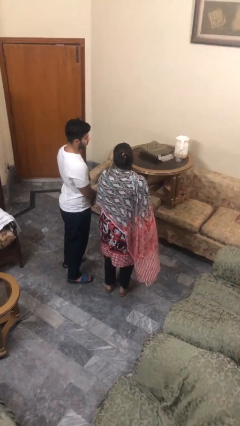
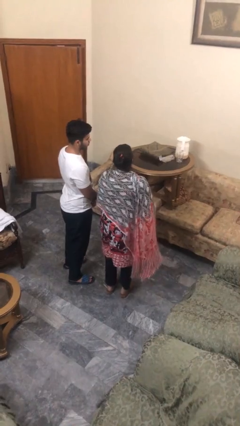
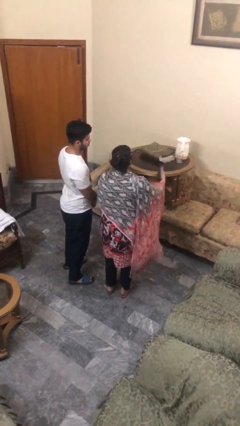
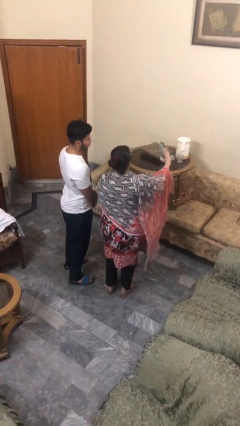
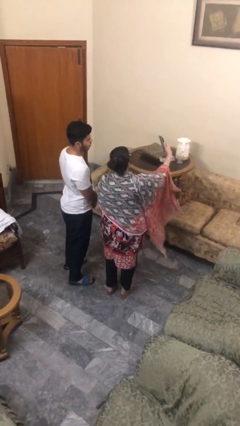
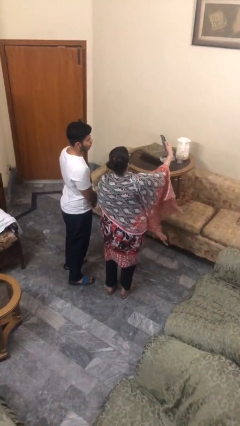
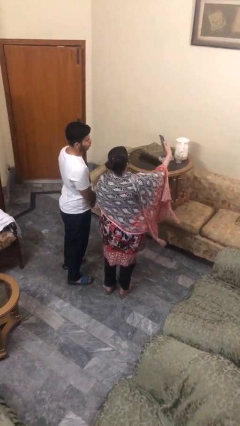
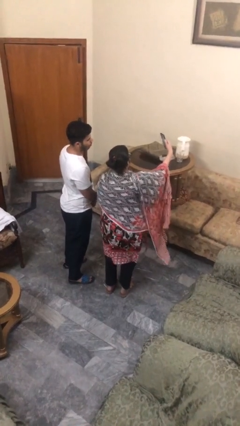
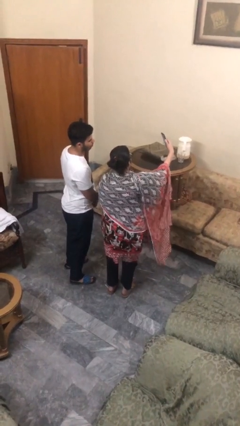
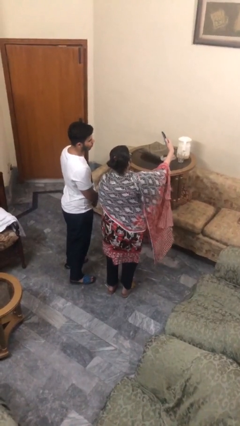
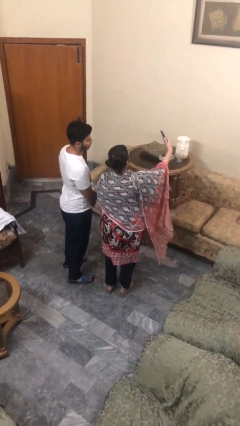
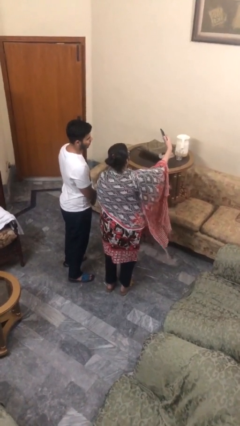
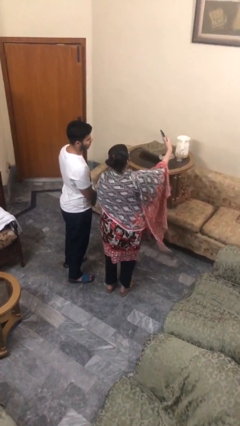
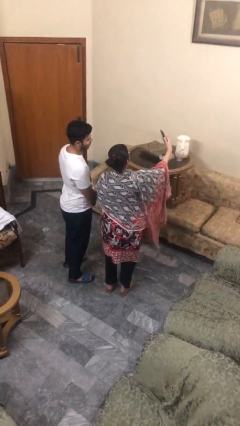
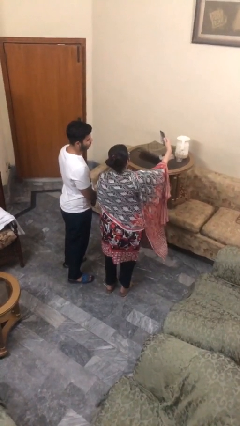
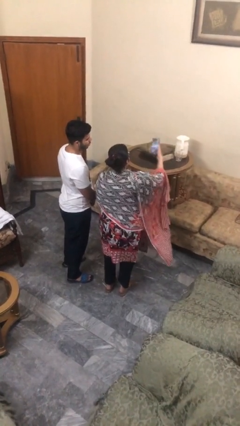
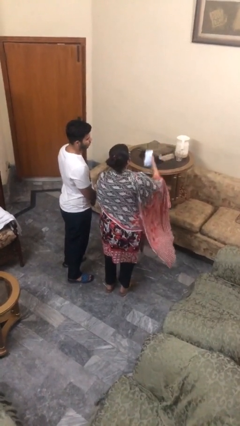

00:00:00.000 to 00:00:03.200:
person takes selfie with person

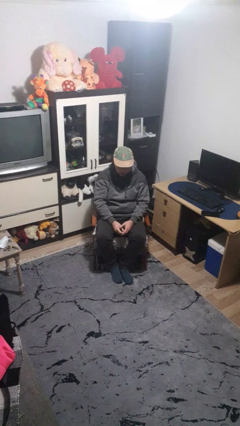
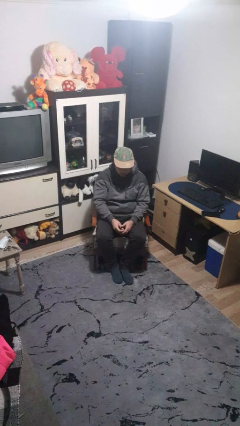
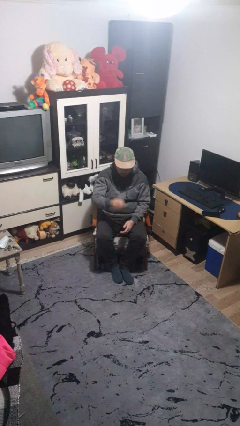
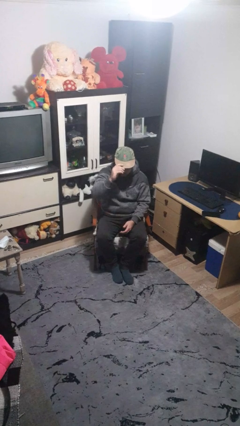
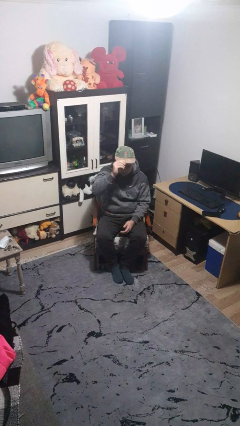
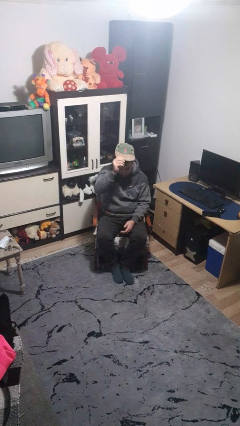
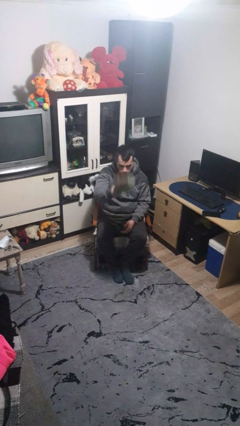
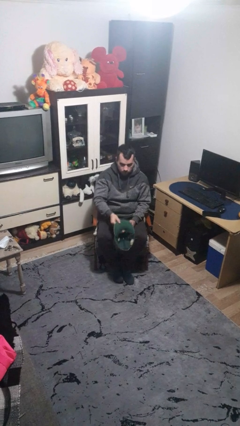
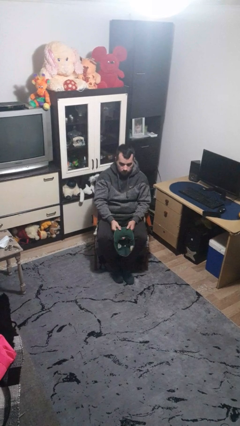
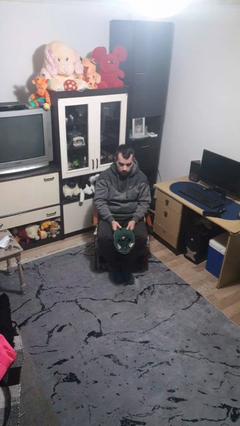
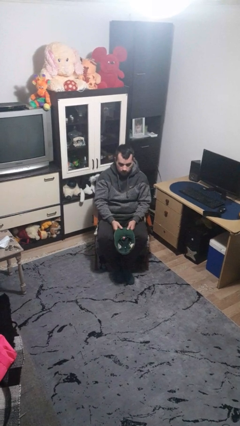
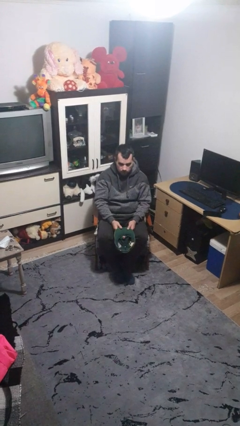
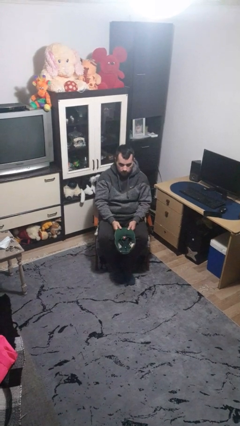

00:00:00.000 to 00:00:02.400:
person takes off hat

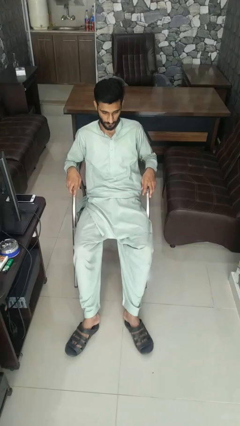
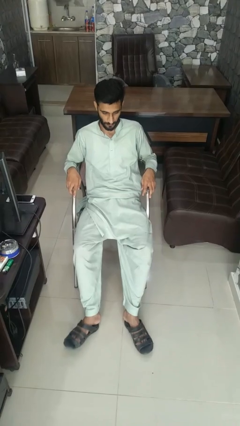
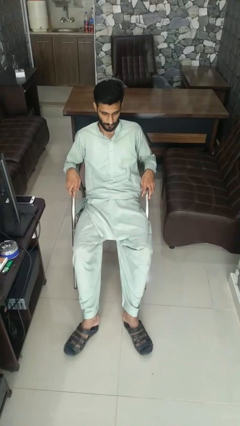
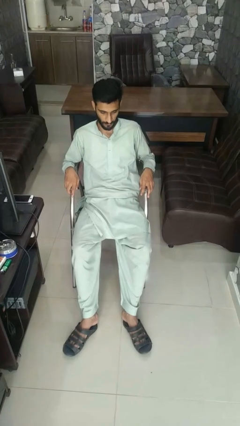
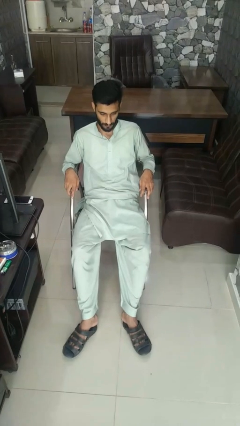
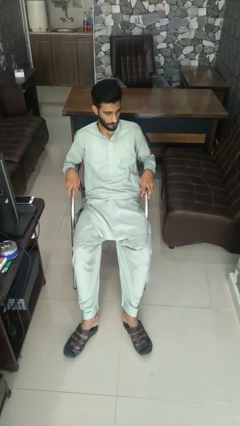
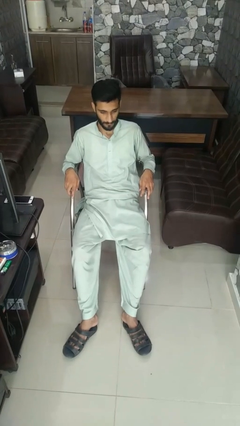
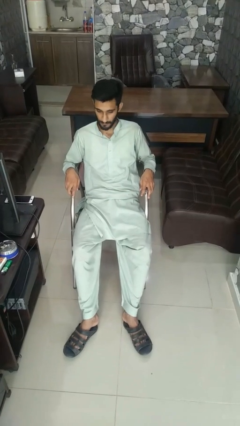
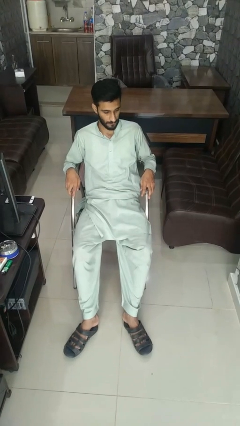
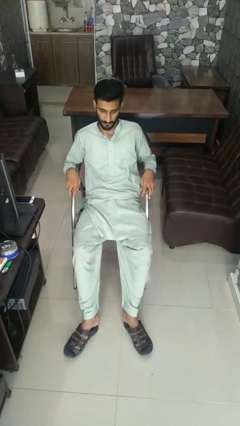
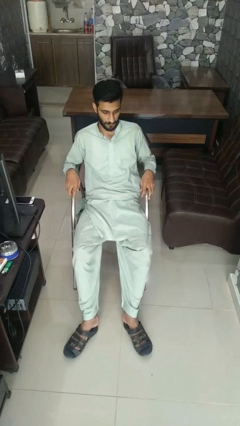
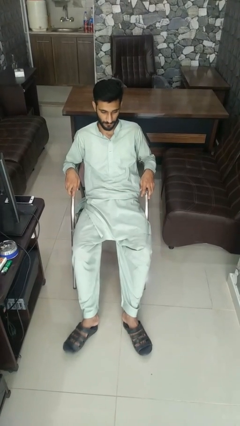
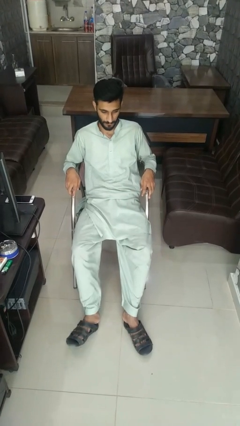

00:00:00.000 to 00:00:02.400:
person shakes head

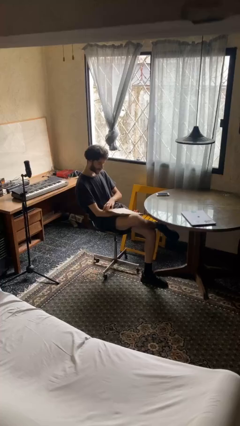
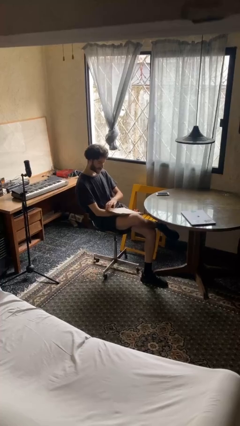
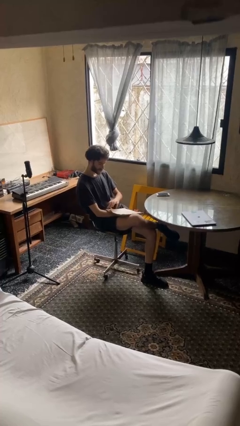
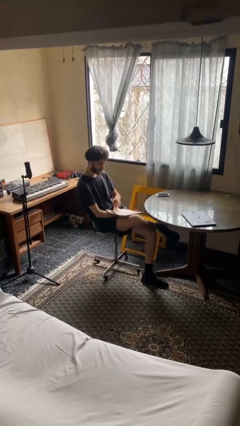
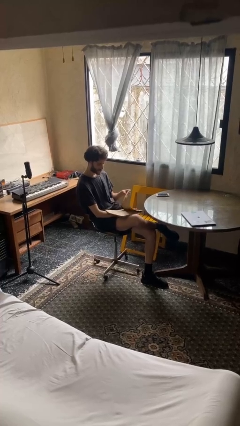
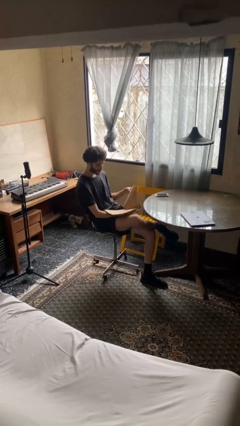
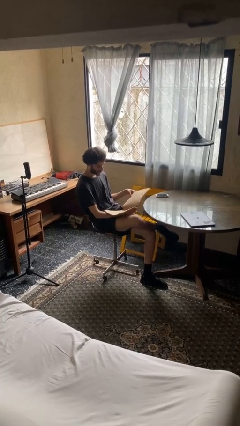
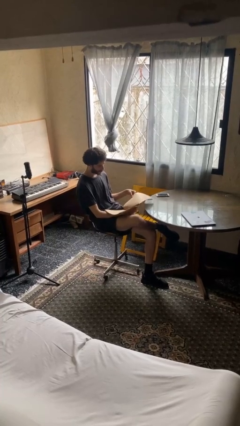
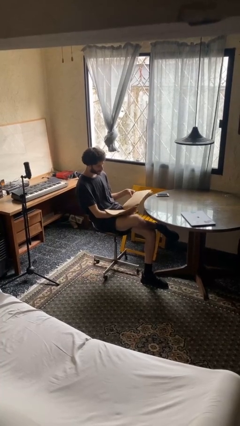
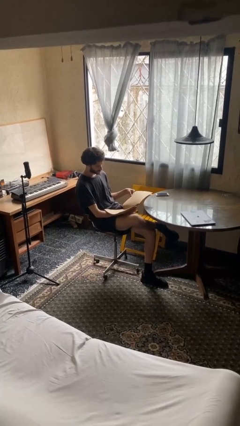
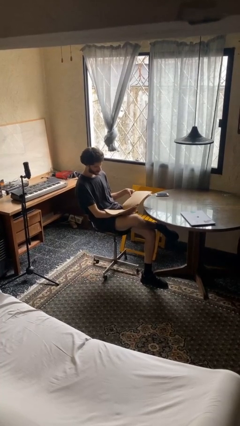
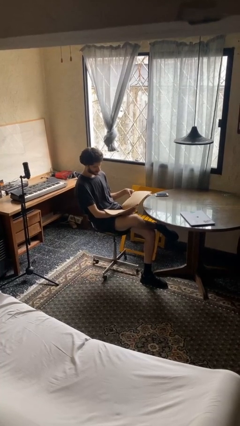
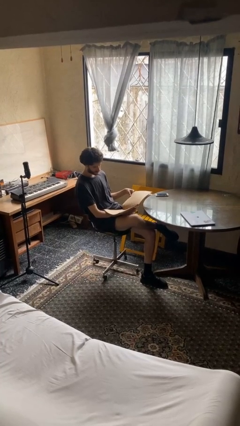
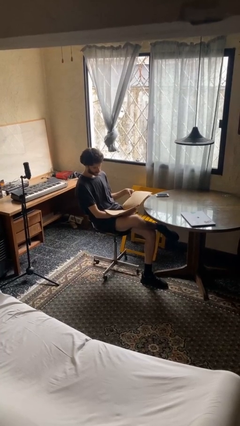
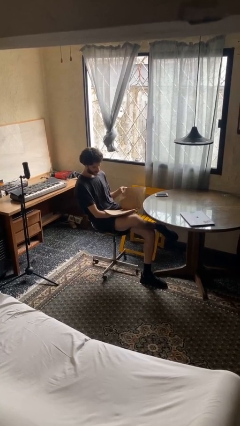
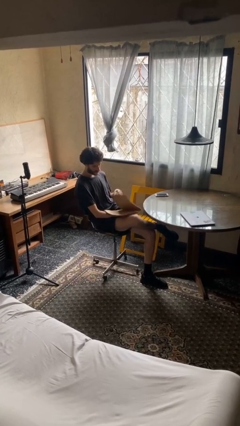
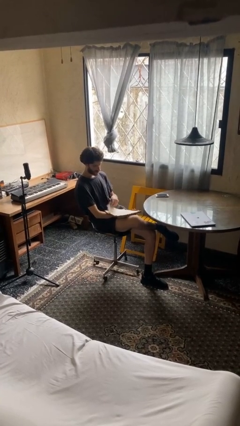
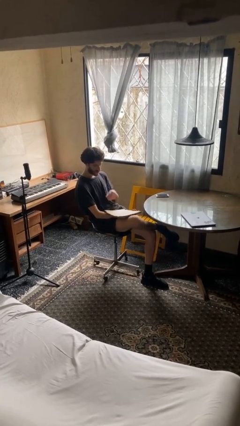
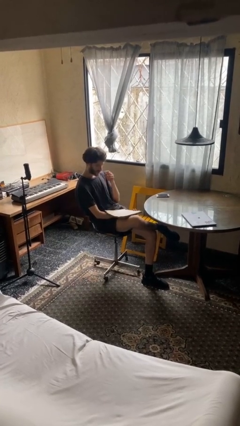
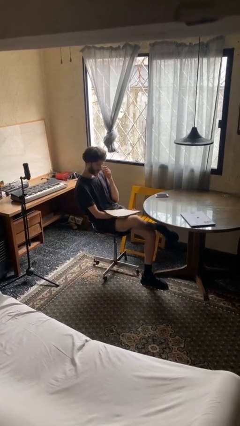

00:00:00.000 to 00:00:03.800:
person reads document

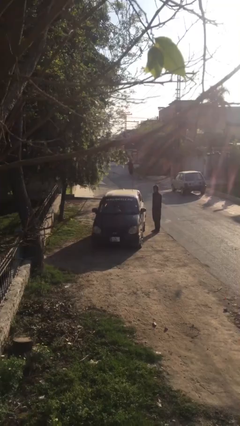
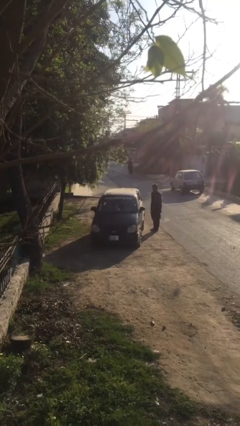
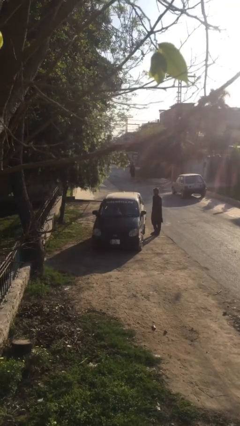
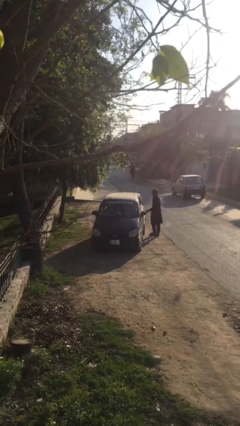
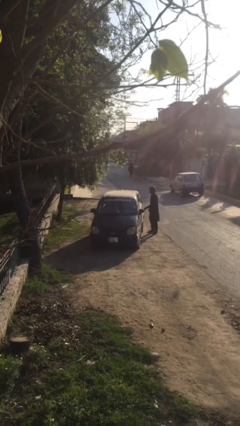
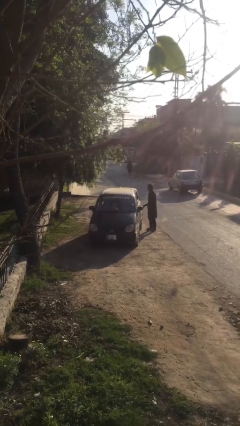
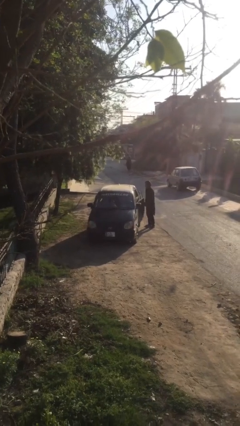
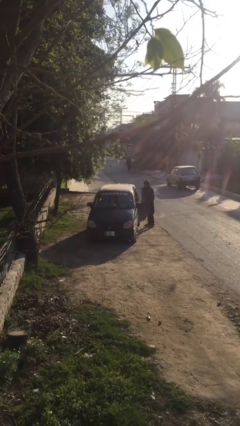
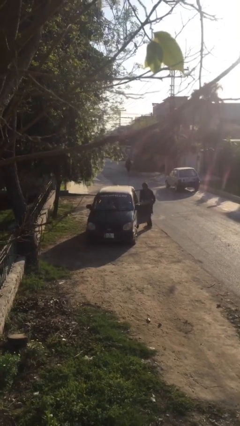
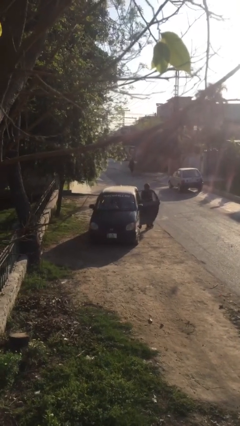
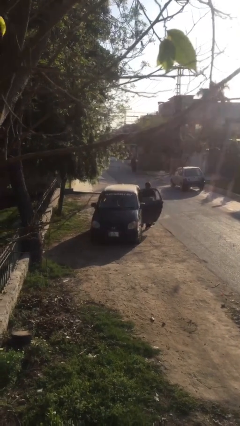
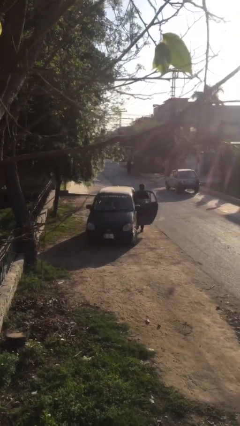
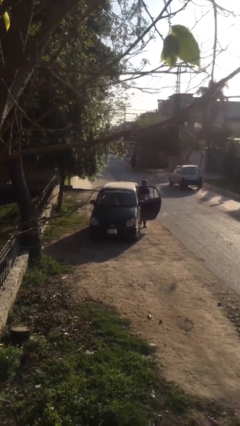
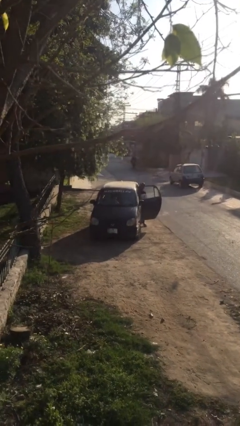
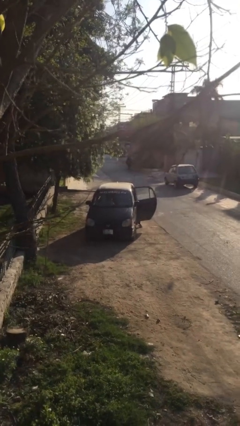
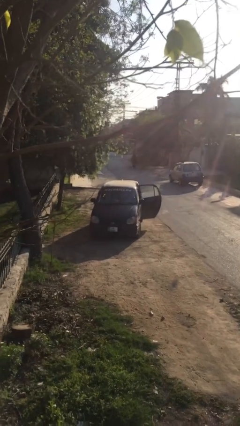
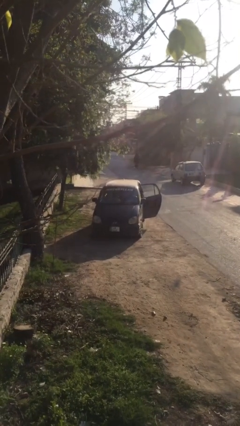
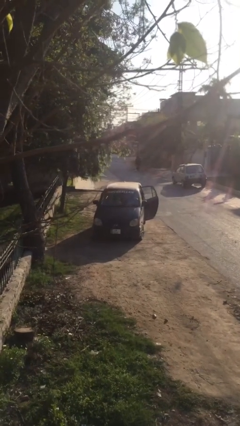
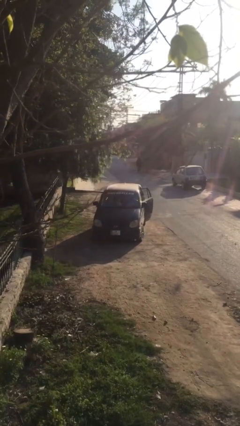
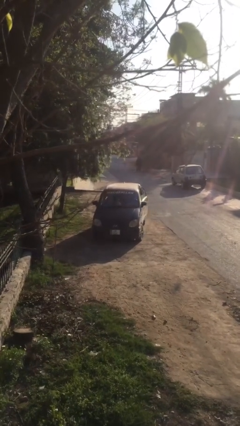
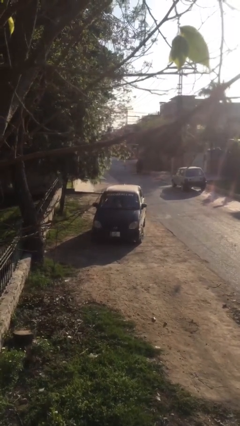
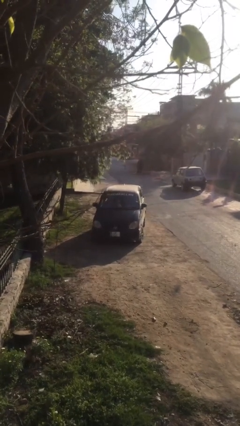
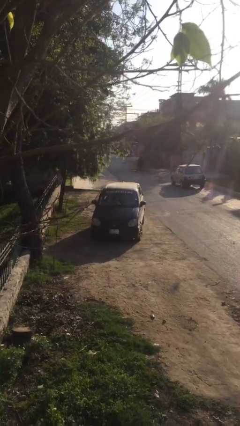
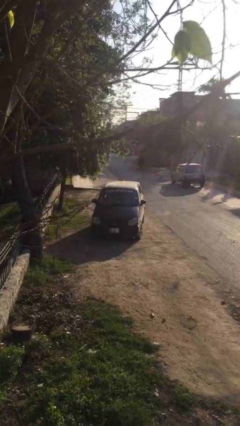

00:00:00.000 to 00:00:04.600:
car picks up person

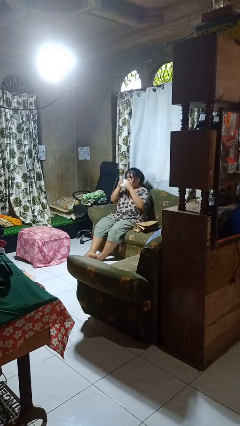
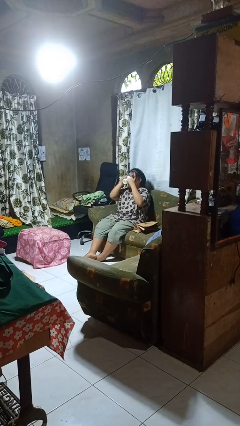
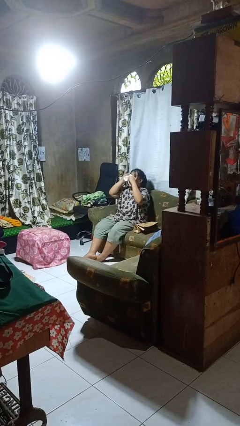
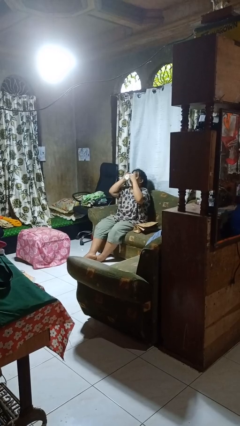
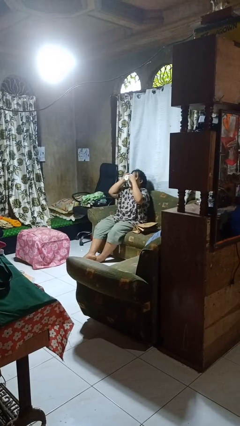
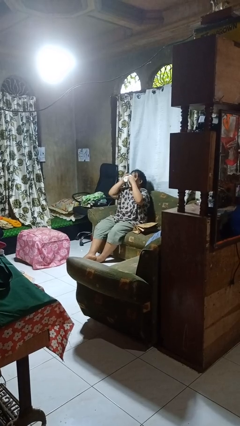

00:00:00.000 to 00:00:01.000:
person drinks from mug
